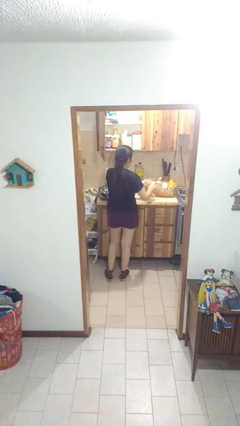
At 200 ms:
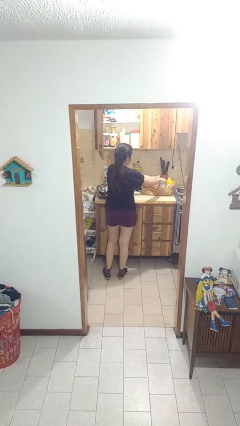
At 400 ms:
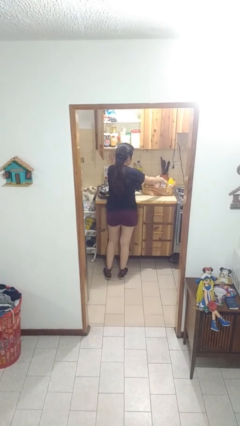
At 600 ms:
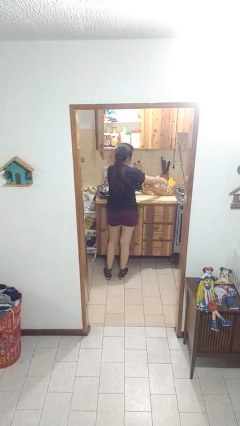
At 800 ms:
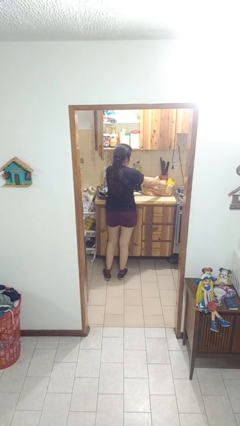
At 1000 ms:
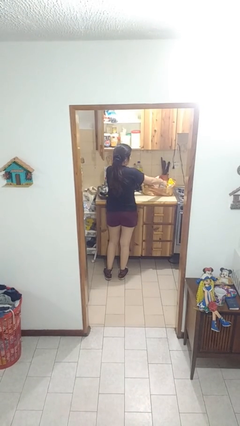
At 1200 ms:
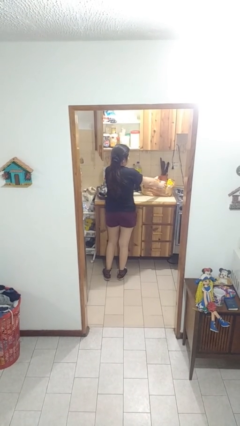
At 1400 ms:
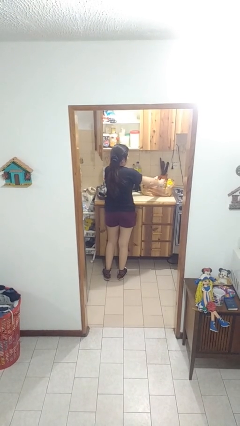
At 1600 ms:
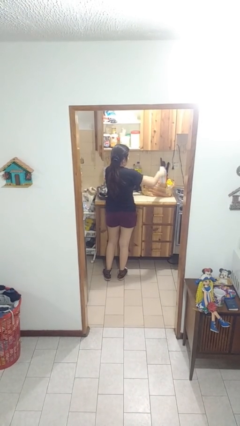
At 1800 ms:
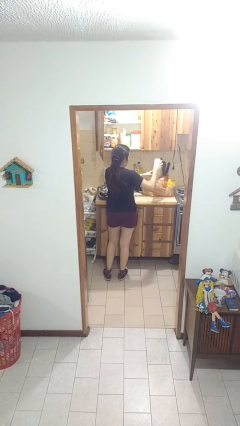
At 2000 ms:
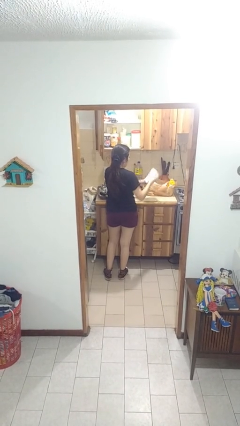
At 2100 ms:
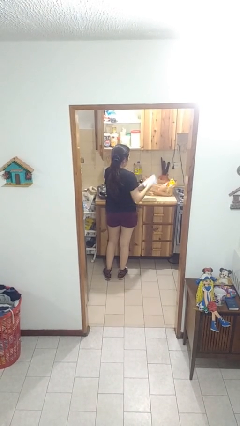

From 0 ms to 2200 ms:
person takes object from bag

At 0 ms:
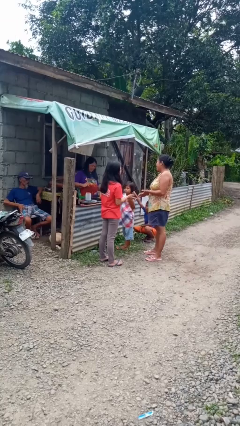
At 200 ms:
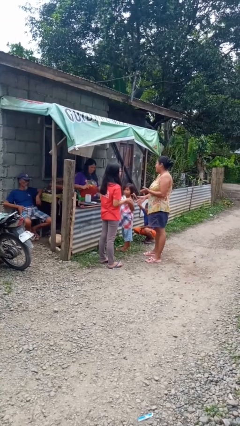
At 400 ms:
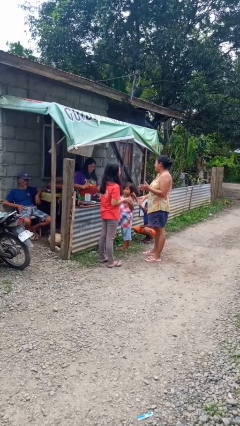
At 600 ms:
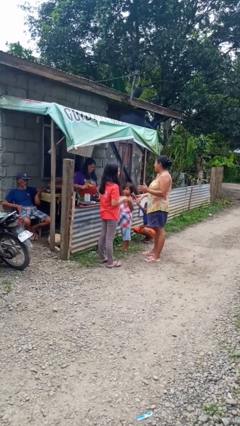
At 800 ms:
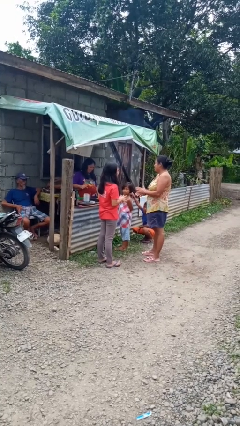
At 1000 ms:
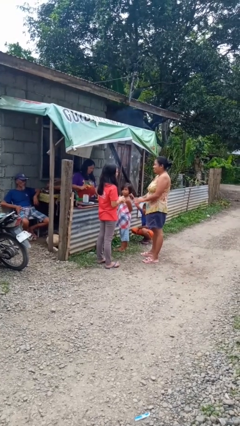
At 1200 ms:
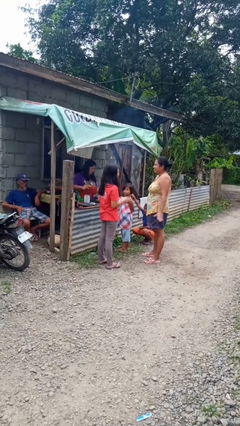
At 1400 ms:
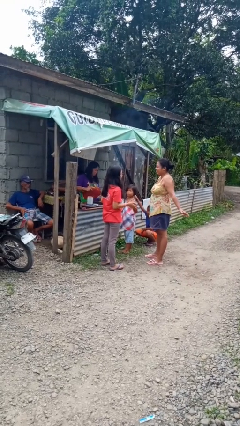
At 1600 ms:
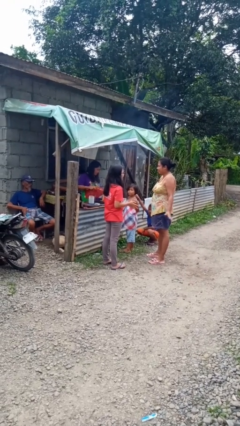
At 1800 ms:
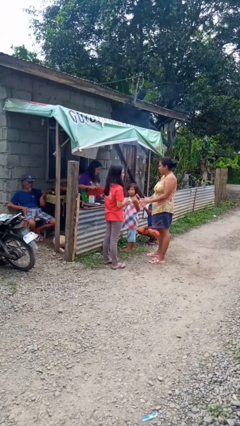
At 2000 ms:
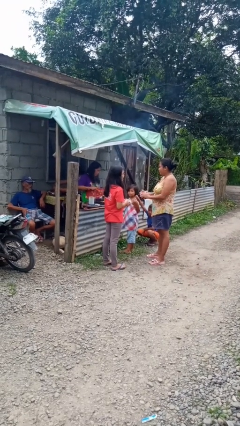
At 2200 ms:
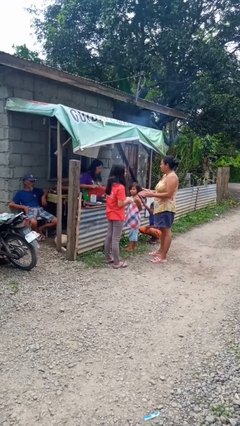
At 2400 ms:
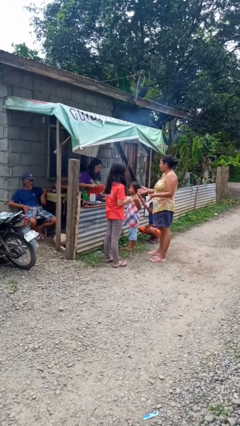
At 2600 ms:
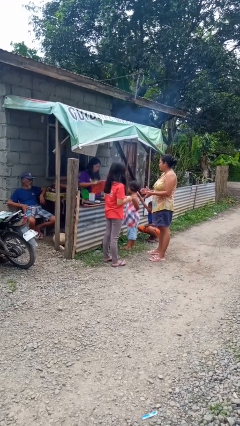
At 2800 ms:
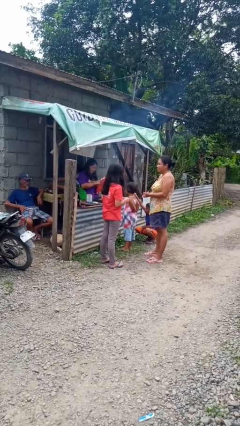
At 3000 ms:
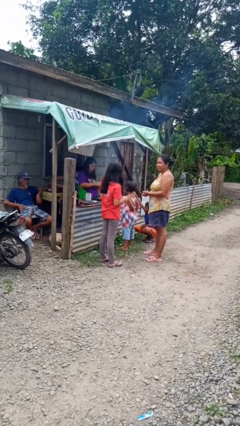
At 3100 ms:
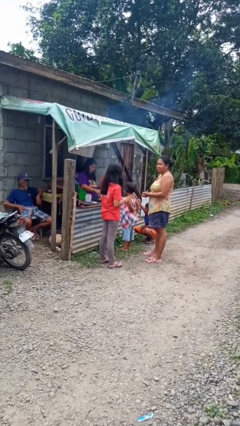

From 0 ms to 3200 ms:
person talks to person

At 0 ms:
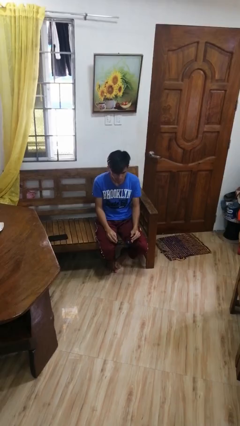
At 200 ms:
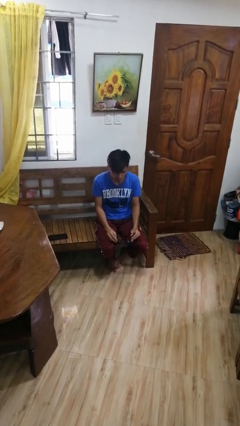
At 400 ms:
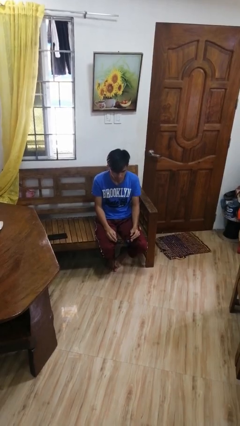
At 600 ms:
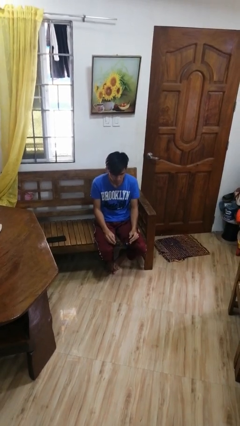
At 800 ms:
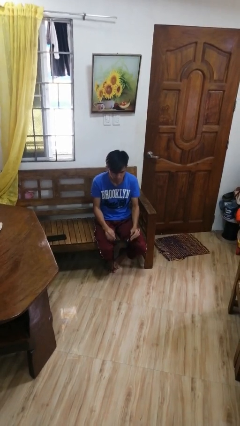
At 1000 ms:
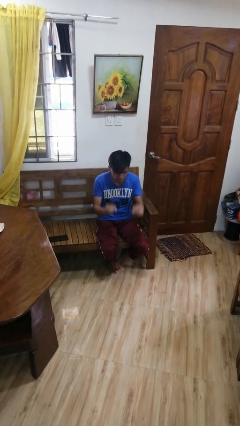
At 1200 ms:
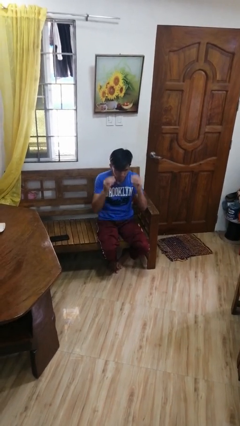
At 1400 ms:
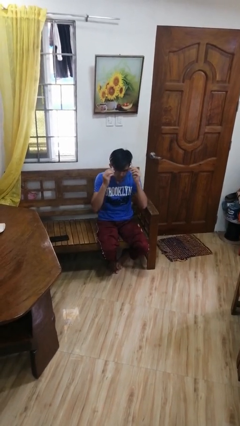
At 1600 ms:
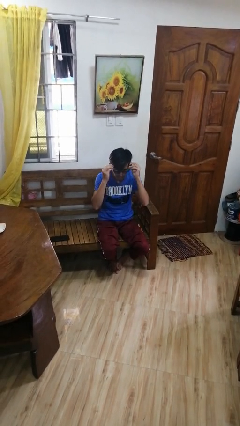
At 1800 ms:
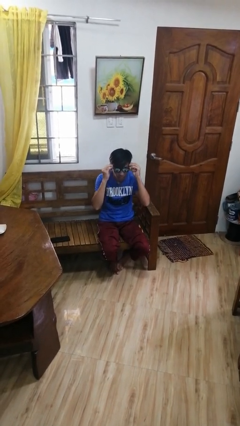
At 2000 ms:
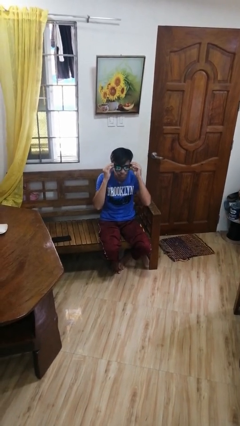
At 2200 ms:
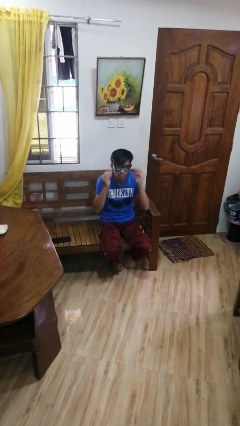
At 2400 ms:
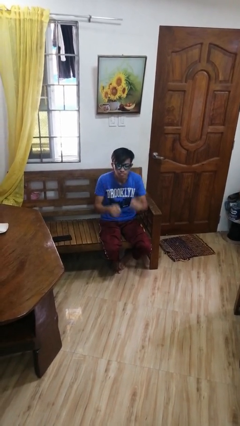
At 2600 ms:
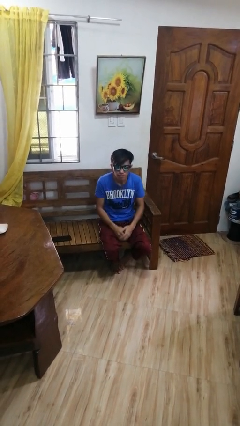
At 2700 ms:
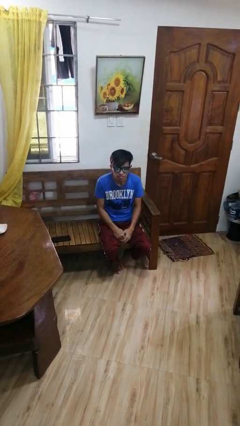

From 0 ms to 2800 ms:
person puts on sunglasses

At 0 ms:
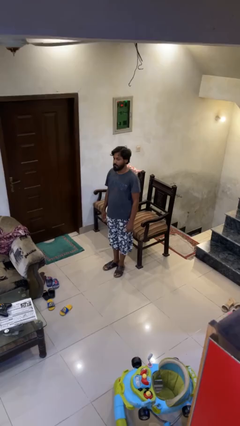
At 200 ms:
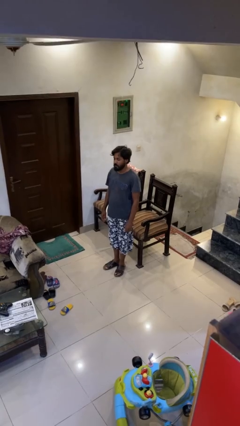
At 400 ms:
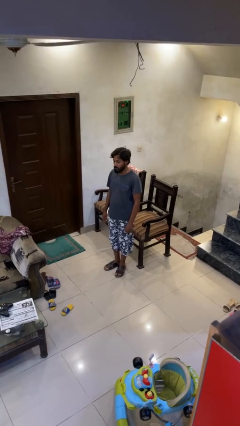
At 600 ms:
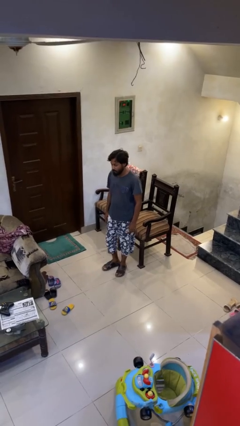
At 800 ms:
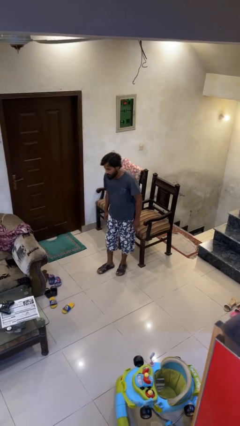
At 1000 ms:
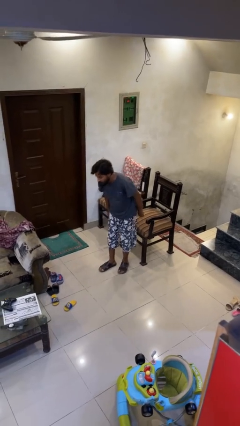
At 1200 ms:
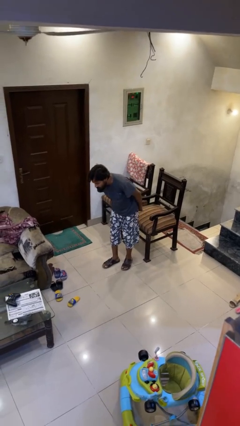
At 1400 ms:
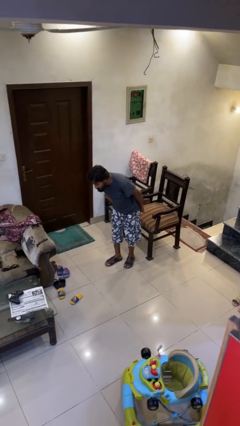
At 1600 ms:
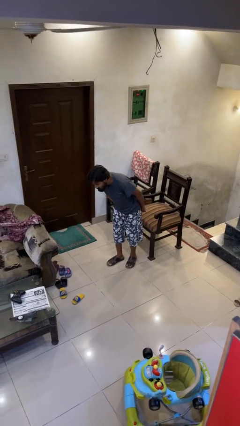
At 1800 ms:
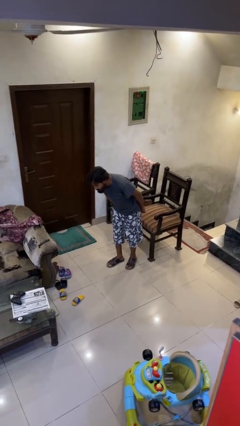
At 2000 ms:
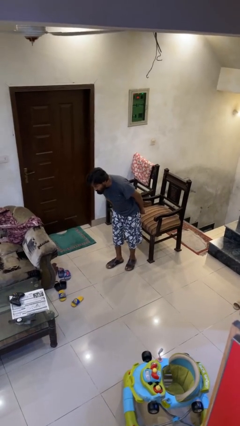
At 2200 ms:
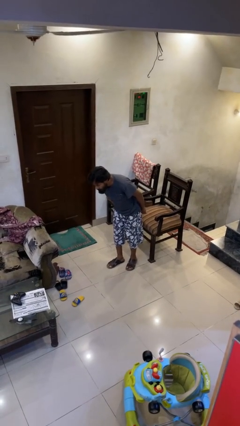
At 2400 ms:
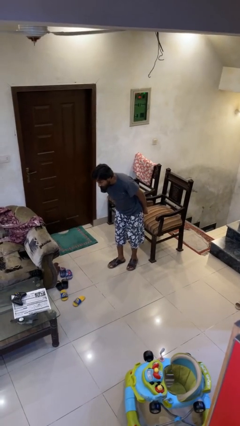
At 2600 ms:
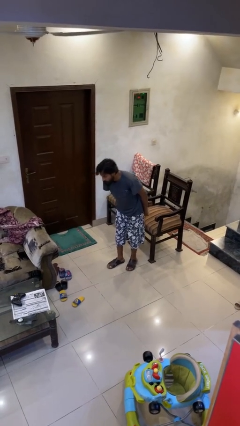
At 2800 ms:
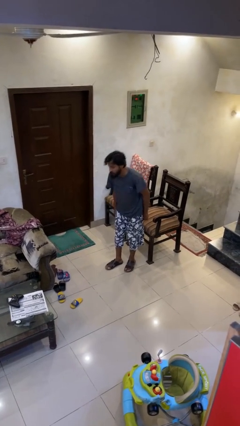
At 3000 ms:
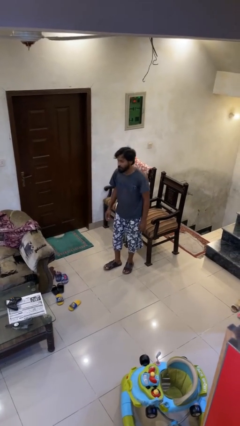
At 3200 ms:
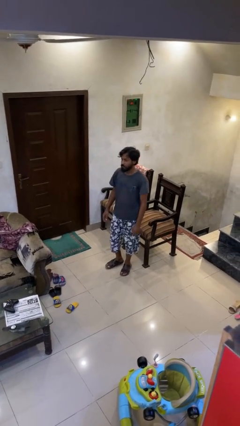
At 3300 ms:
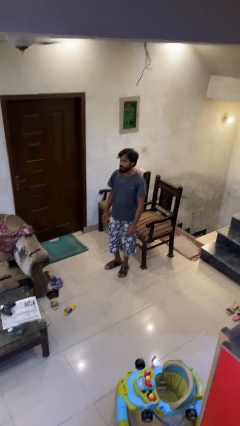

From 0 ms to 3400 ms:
person bows

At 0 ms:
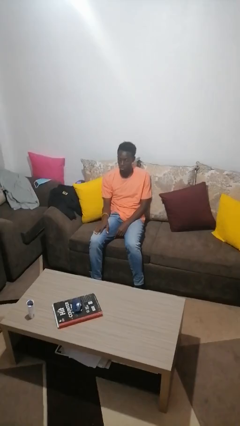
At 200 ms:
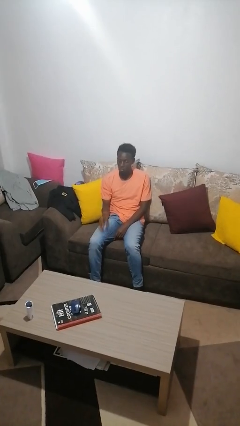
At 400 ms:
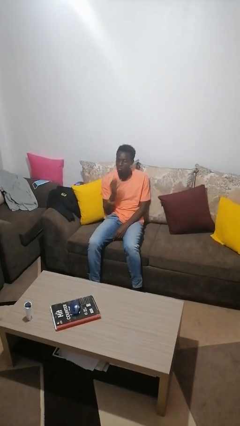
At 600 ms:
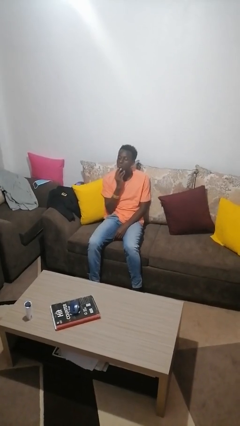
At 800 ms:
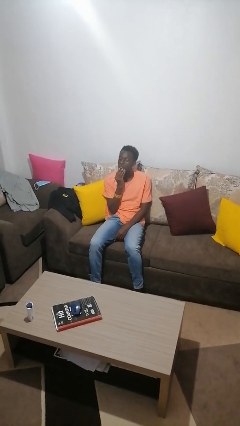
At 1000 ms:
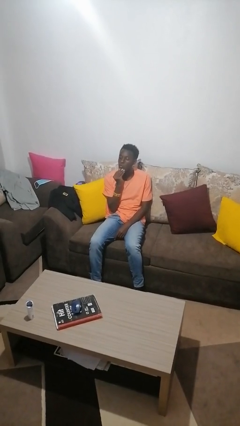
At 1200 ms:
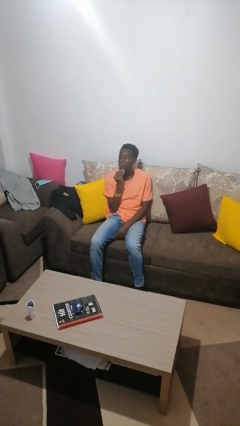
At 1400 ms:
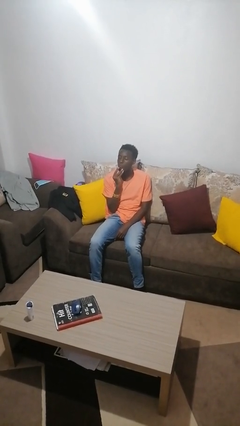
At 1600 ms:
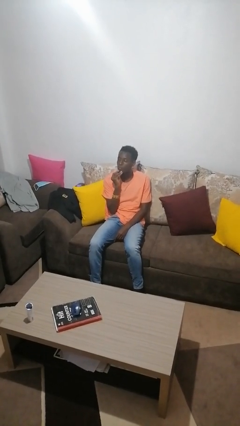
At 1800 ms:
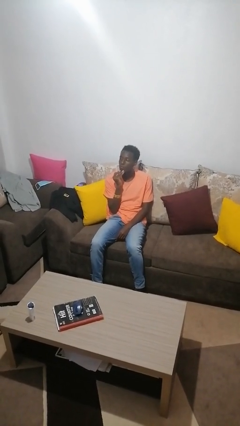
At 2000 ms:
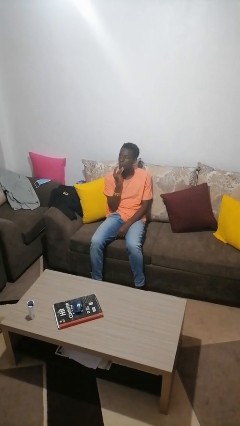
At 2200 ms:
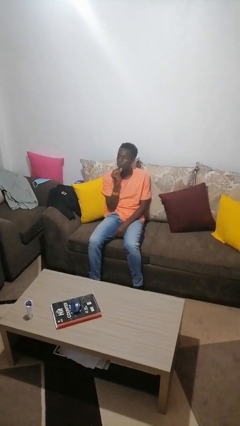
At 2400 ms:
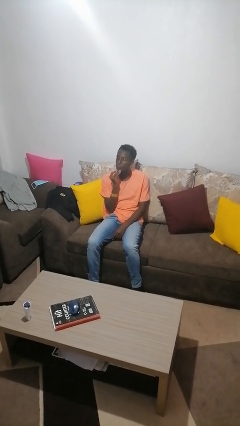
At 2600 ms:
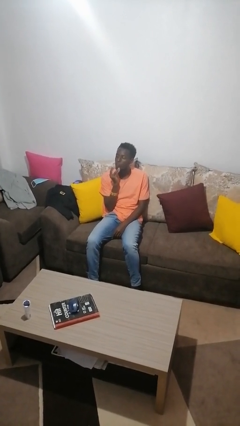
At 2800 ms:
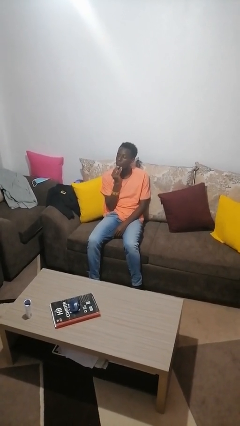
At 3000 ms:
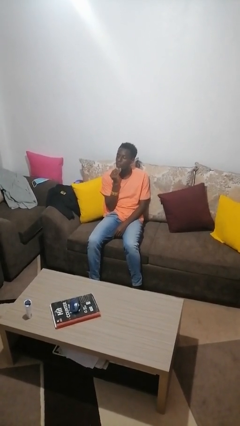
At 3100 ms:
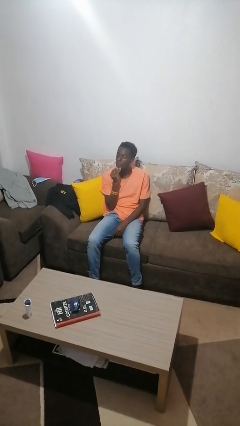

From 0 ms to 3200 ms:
person strokes chin

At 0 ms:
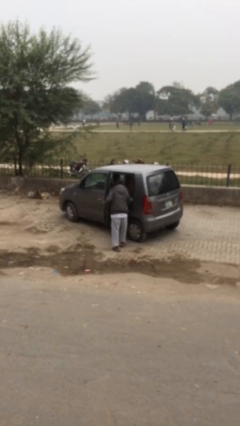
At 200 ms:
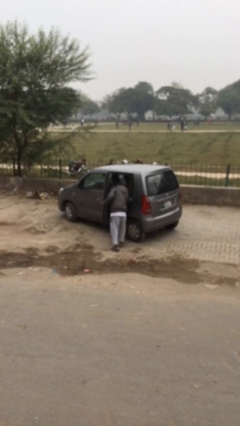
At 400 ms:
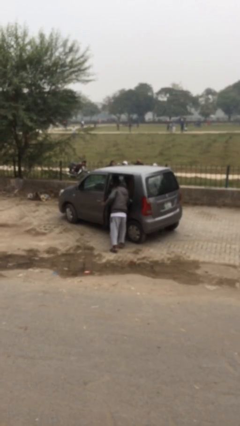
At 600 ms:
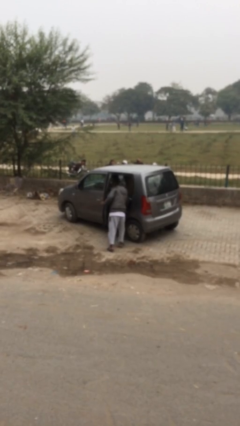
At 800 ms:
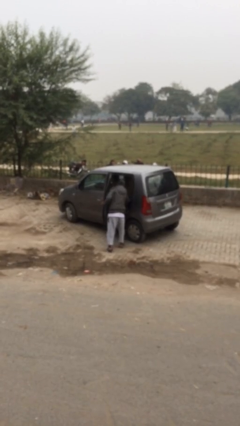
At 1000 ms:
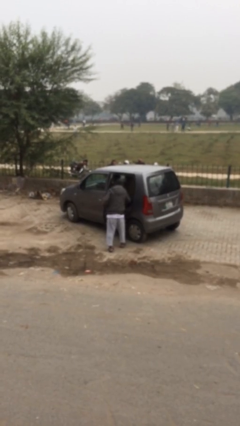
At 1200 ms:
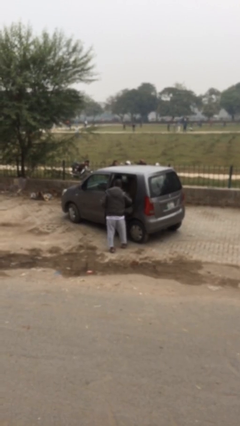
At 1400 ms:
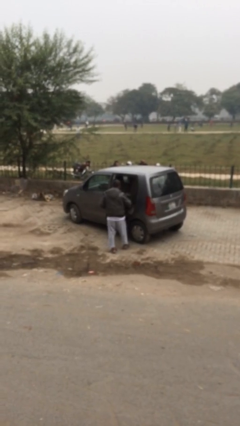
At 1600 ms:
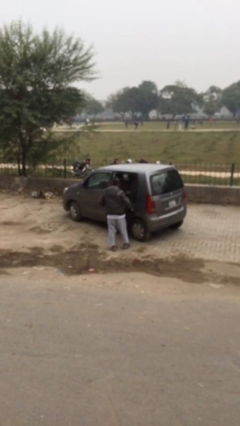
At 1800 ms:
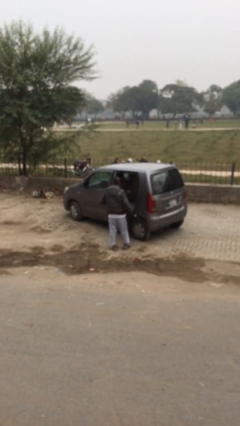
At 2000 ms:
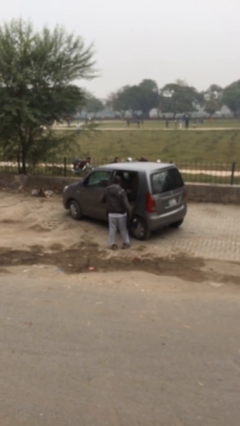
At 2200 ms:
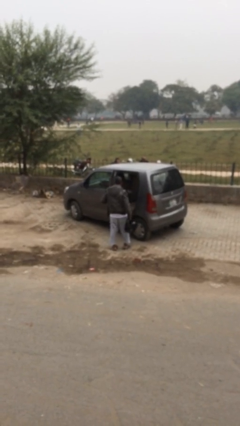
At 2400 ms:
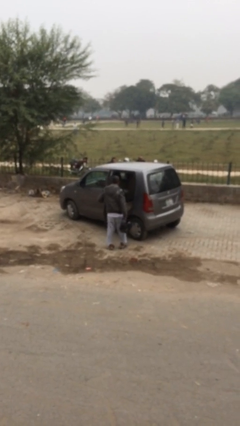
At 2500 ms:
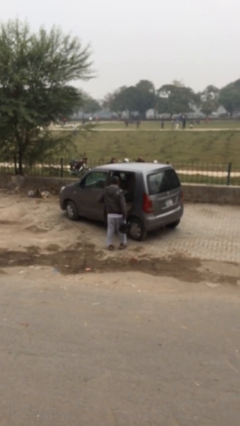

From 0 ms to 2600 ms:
person unloads car
